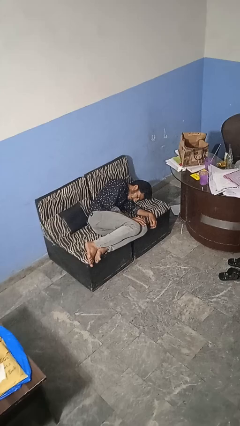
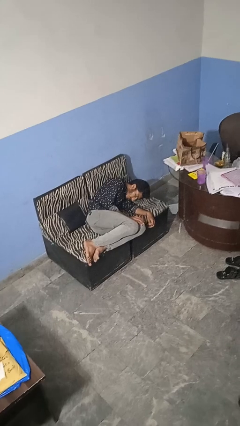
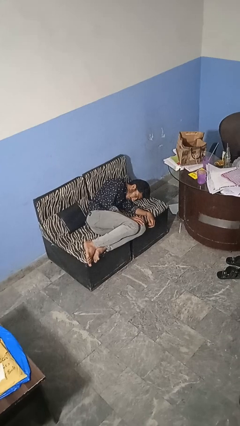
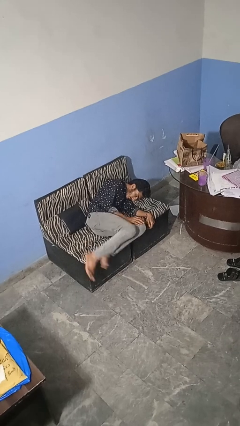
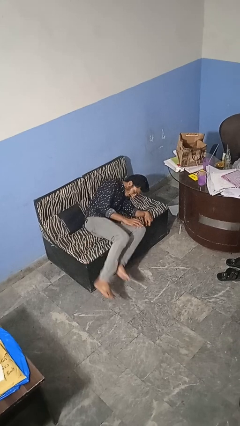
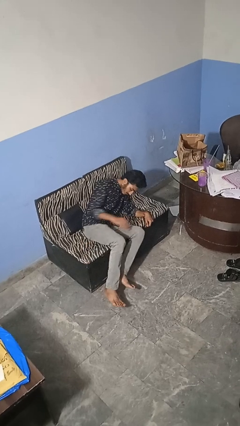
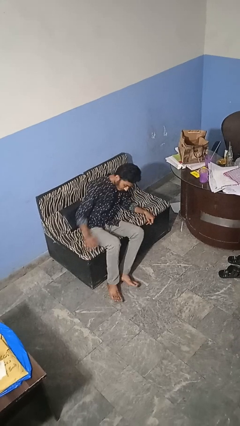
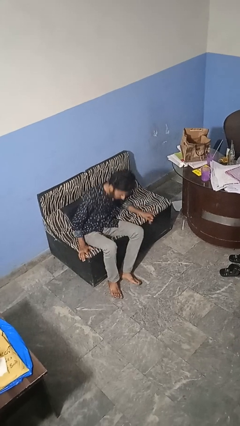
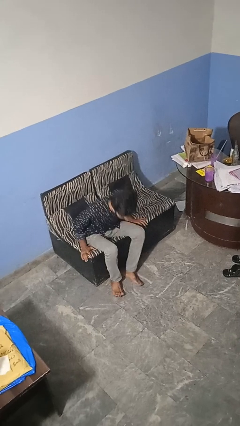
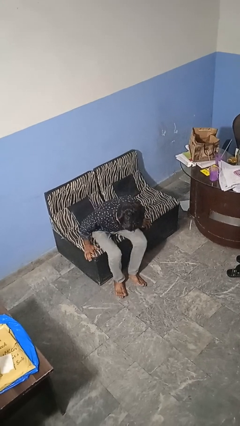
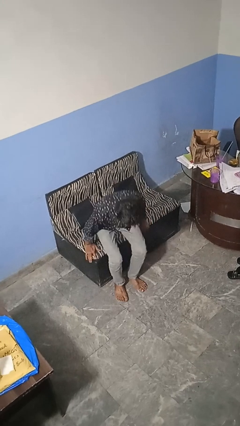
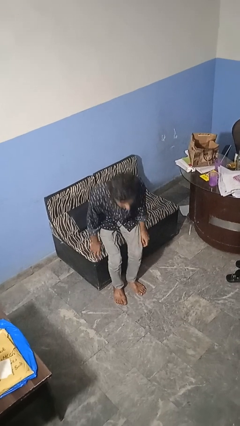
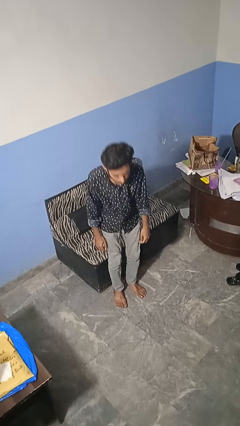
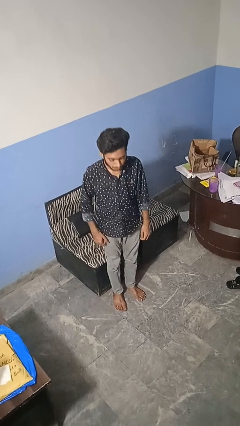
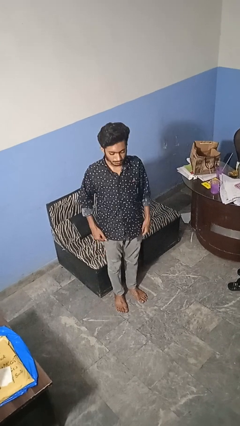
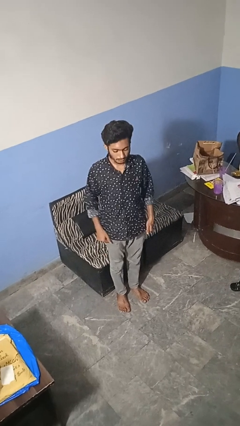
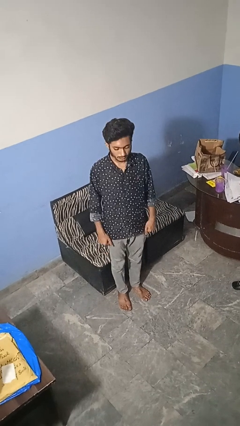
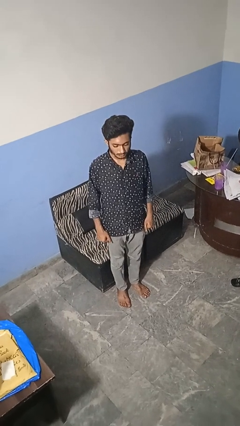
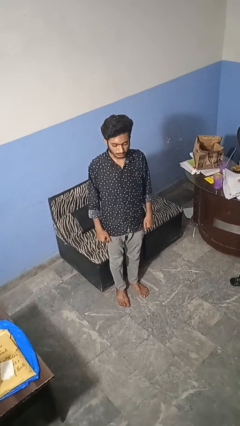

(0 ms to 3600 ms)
person stands up

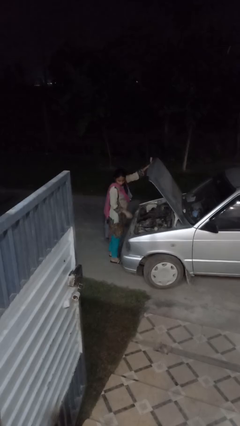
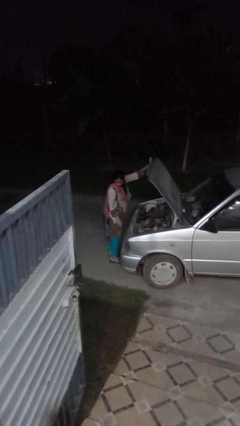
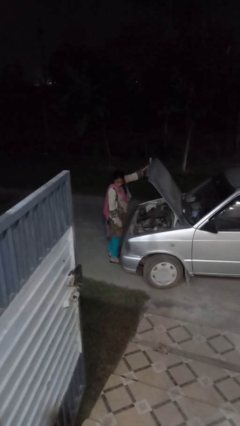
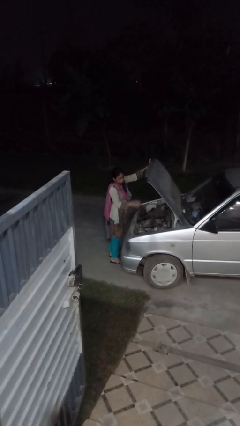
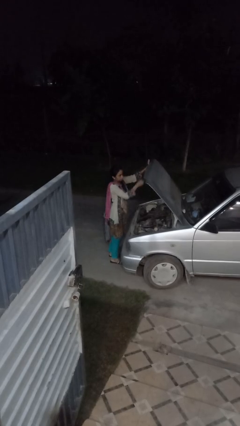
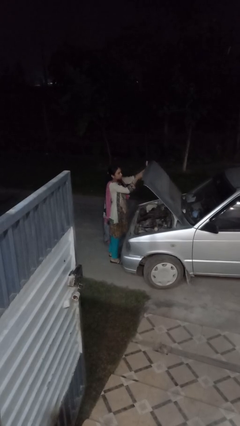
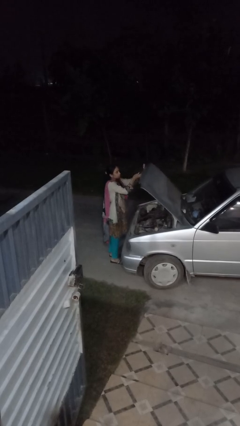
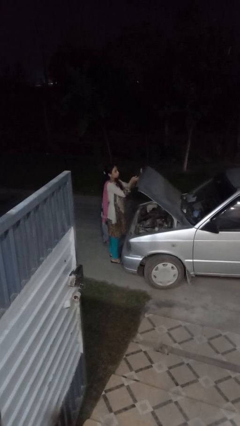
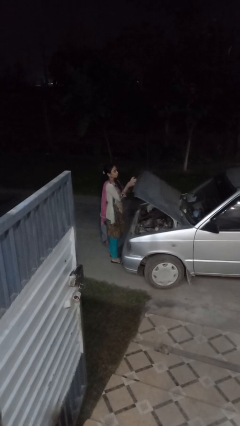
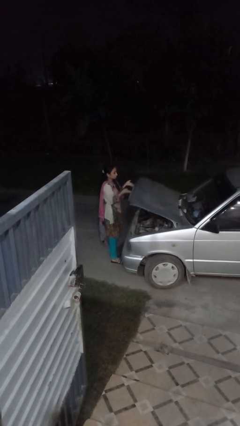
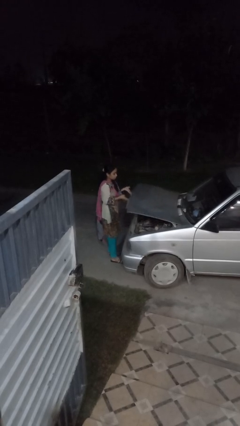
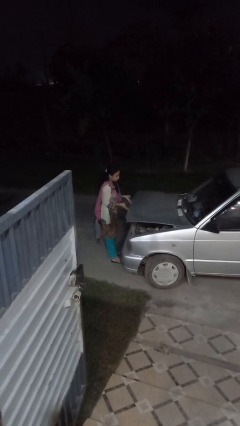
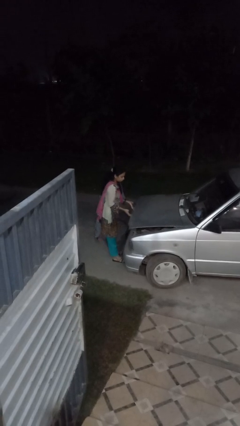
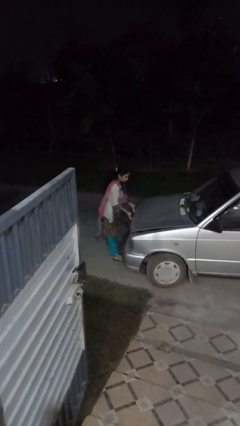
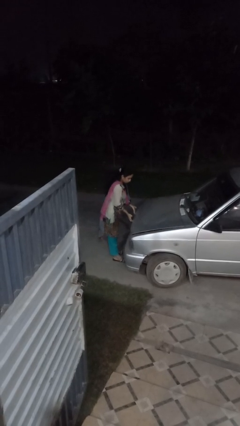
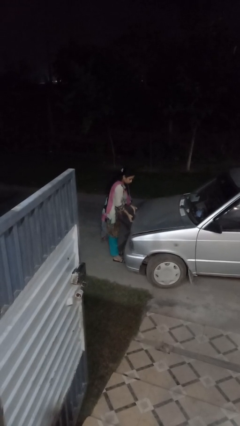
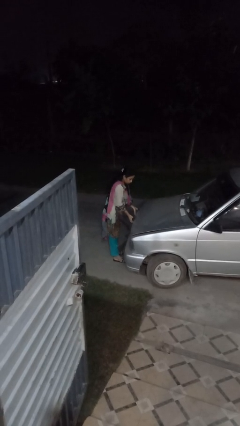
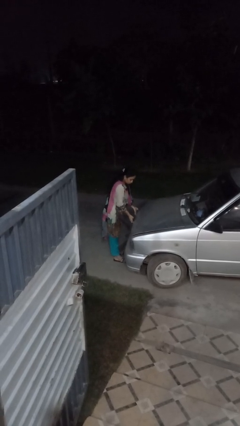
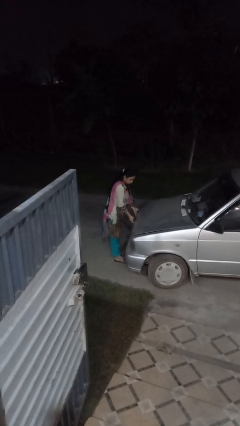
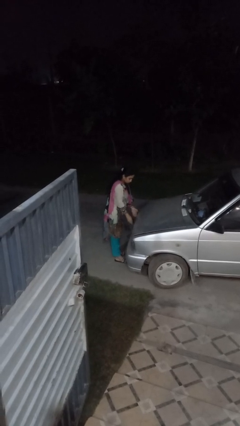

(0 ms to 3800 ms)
person closes car hood

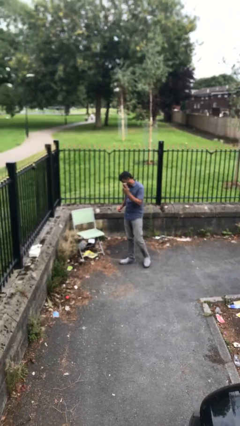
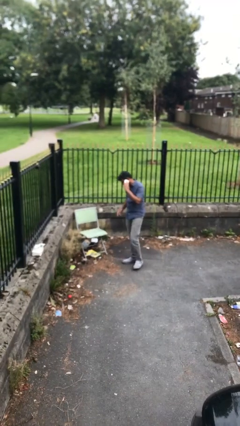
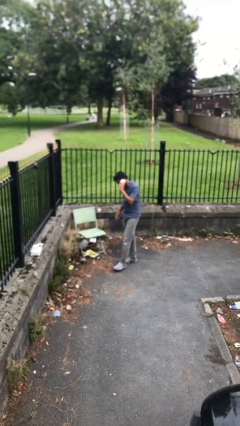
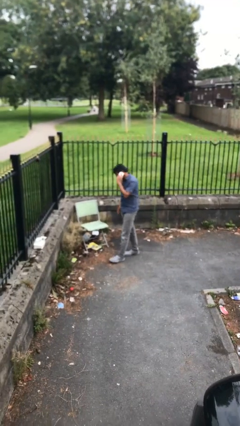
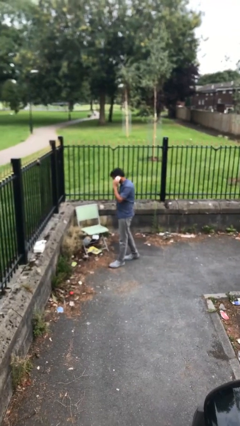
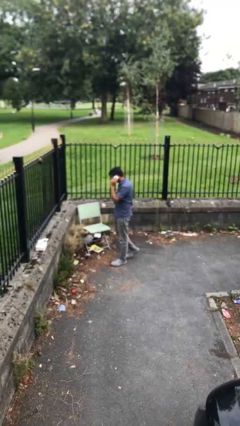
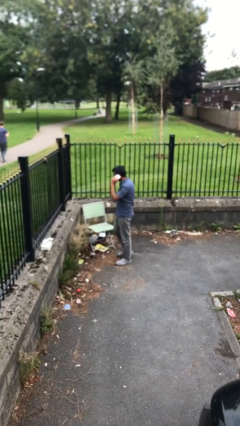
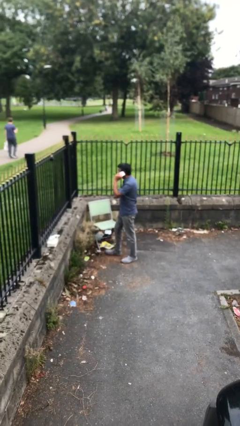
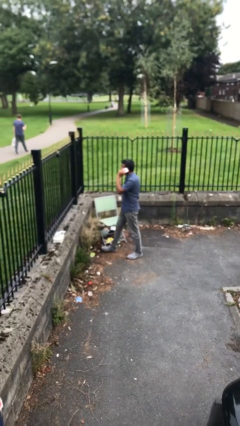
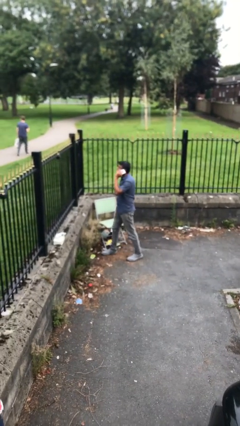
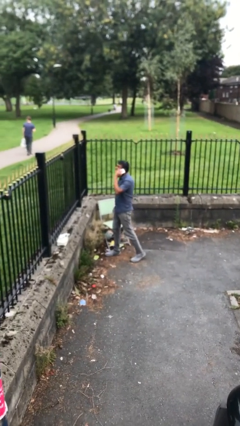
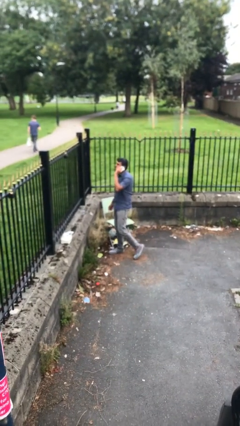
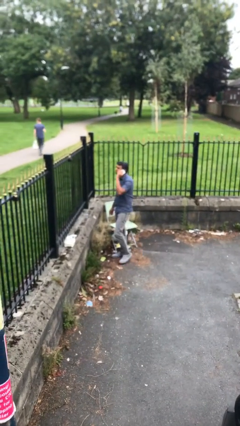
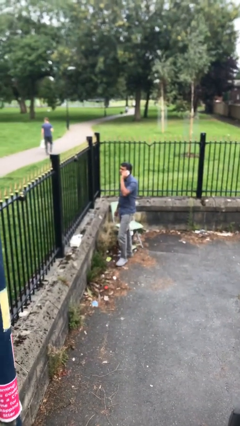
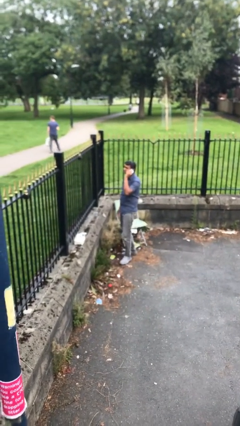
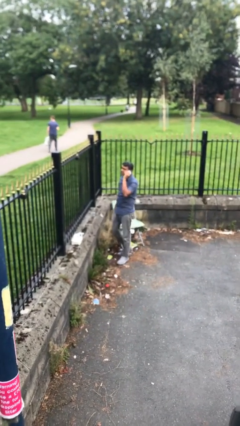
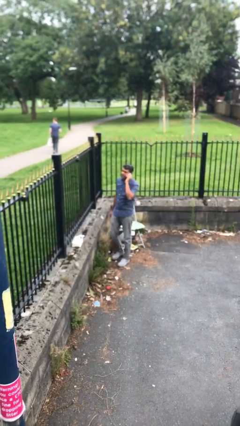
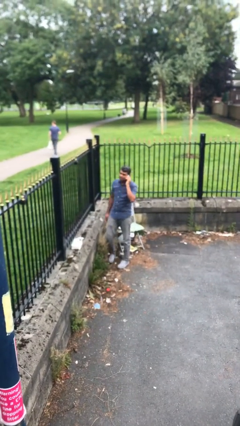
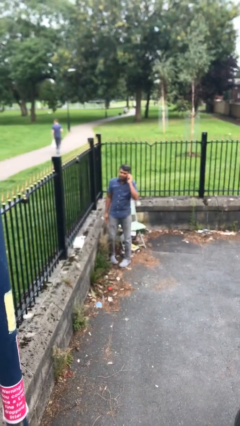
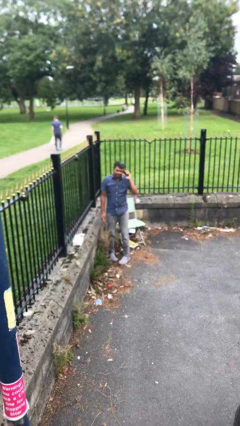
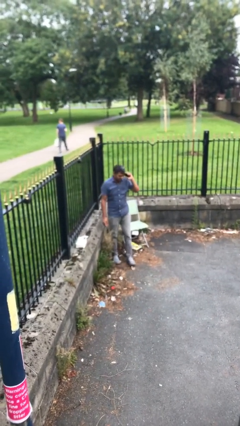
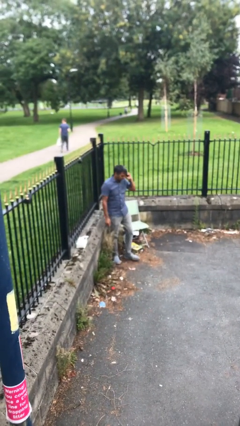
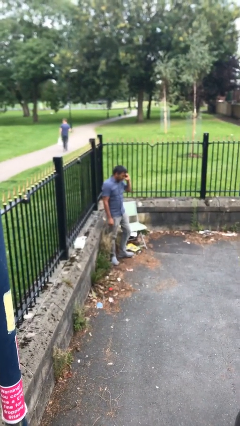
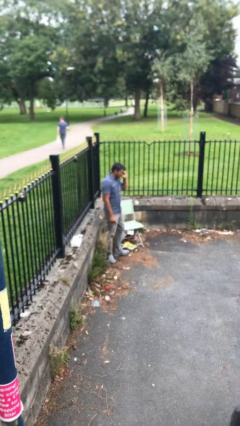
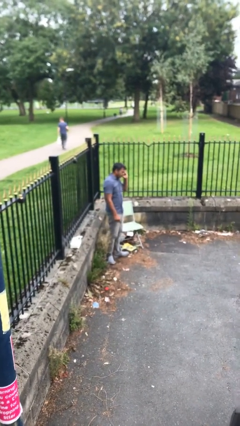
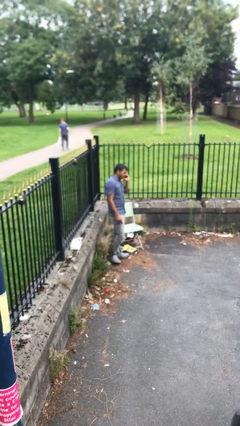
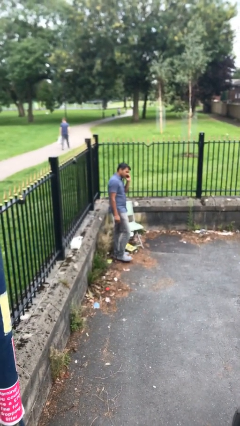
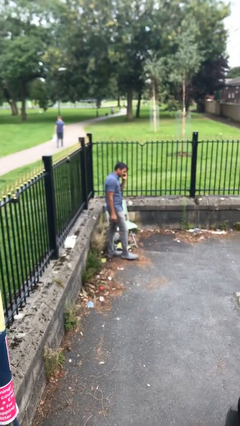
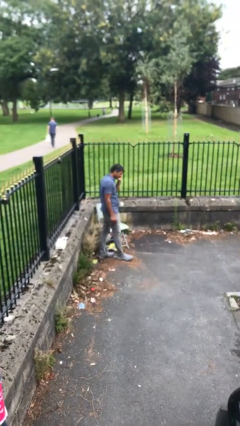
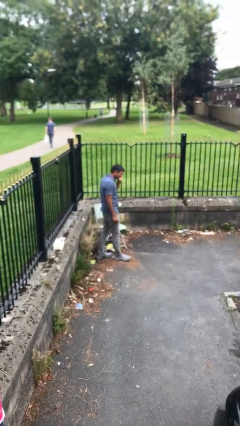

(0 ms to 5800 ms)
person talks on phone

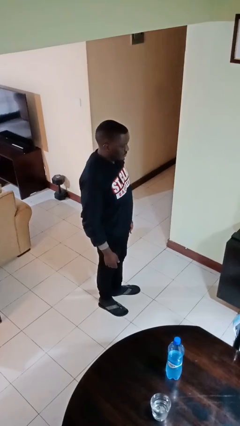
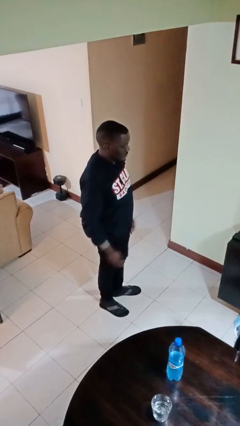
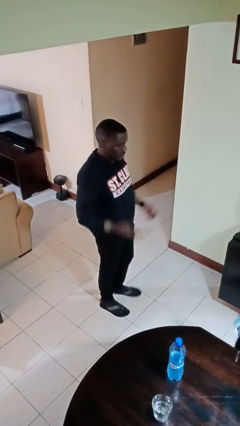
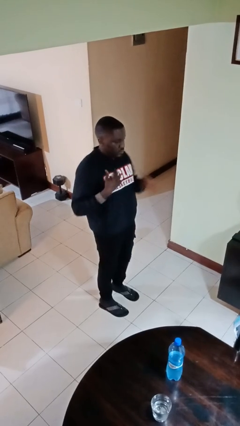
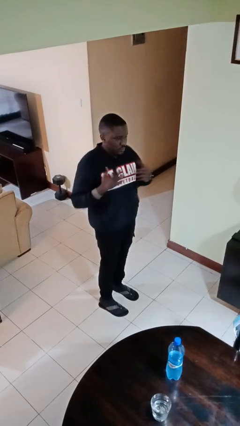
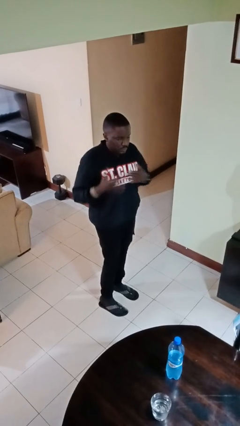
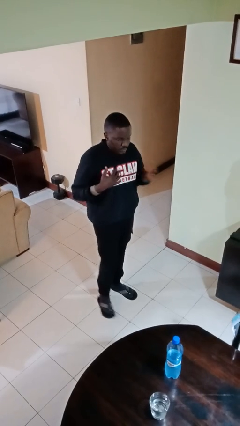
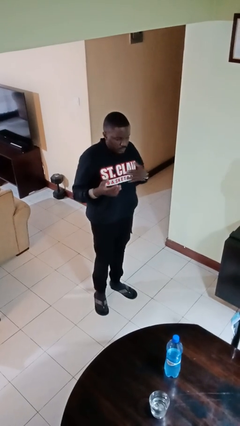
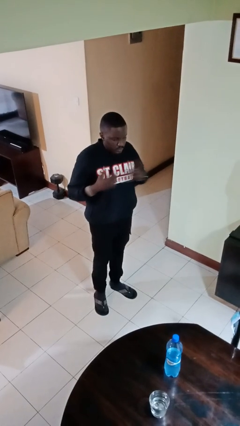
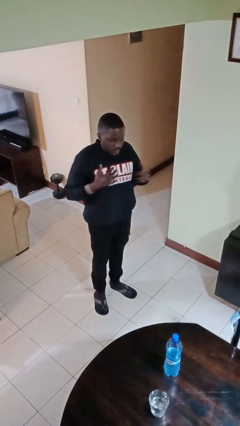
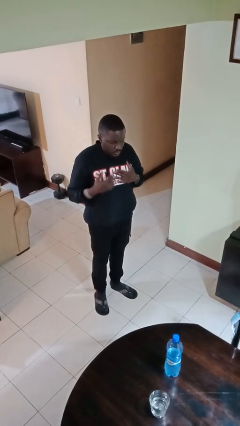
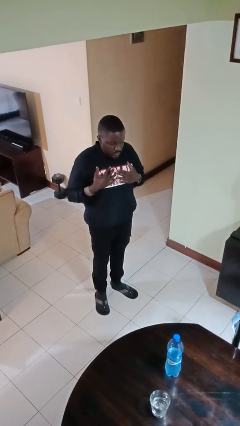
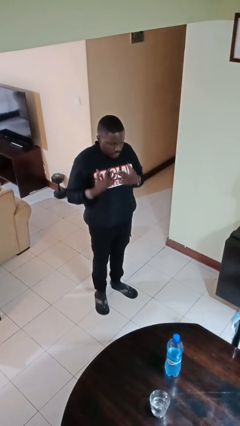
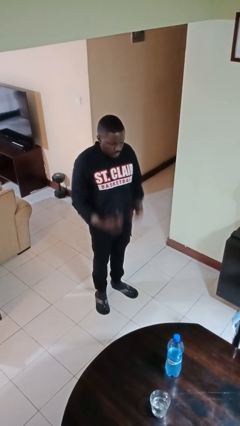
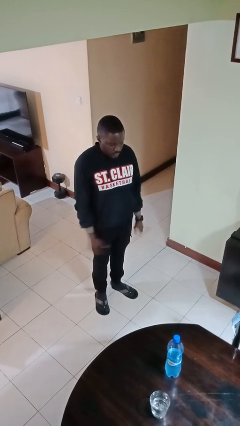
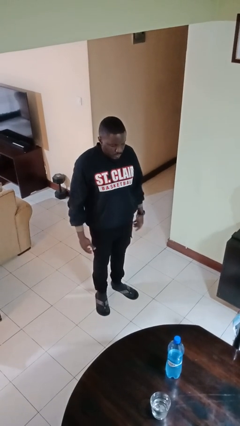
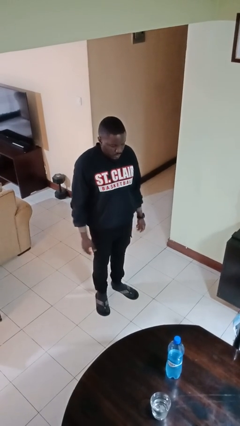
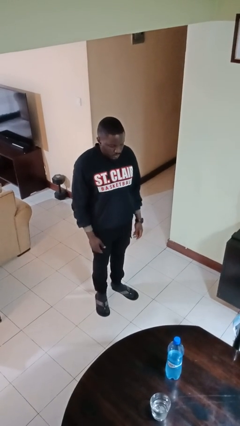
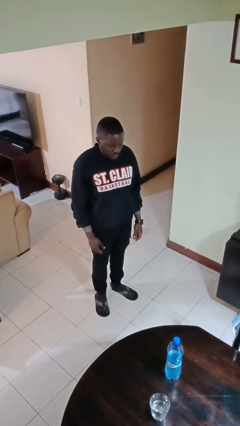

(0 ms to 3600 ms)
person drums on chest

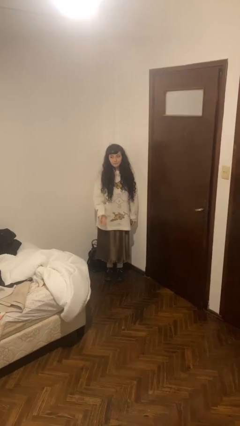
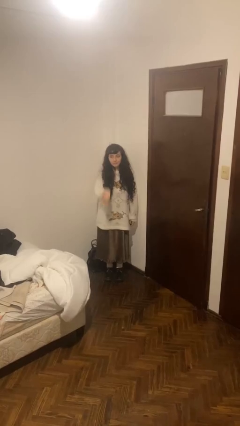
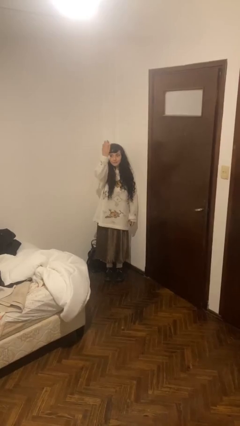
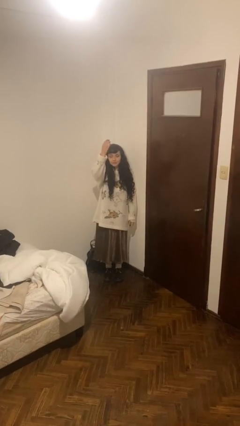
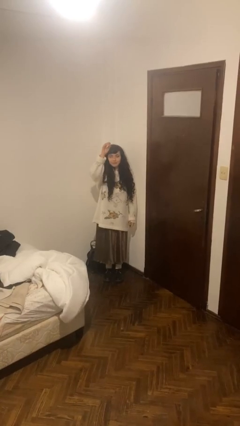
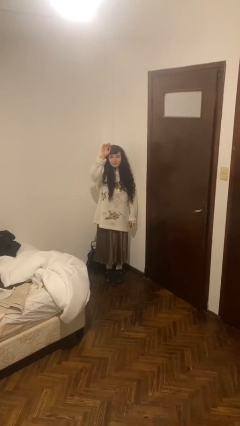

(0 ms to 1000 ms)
person gestures swipe up
